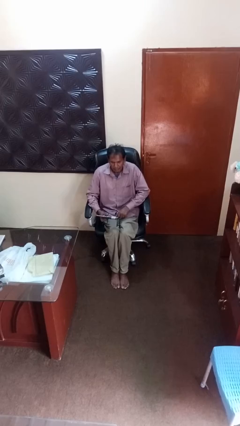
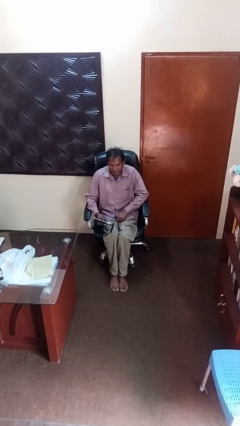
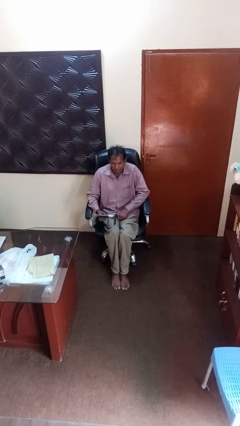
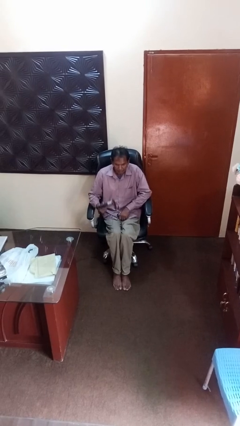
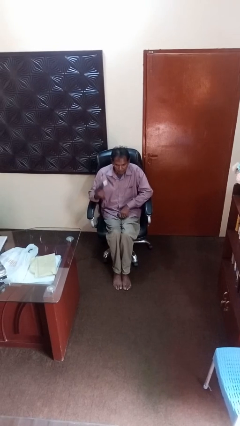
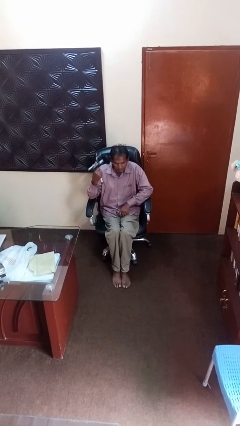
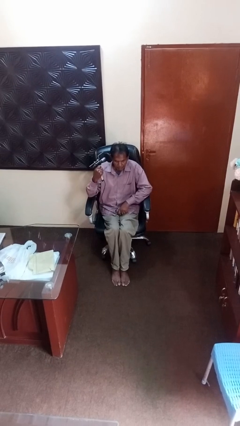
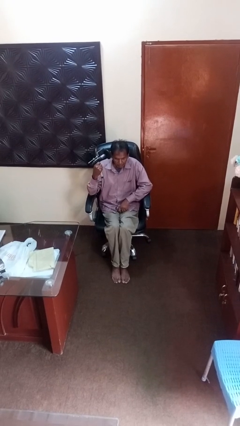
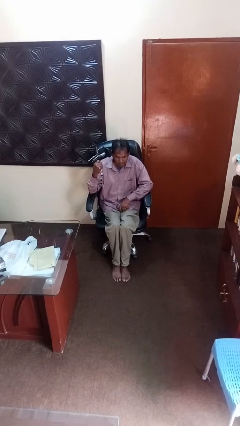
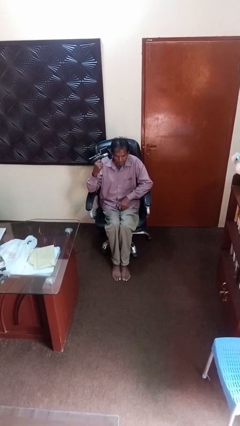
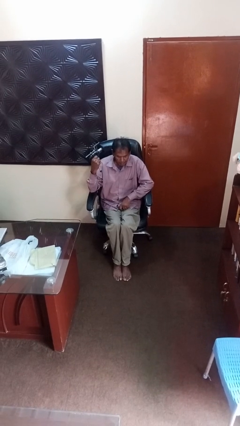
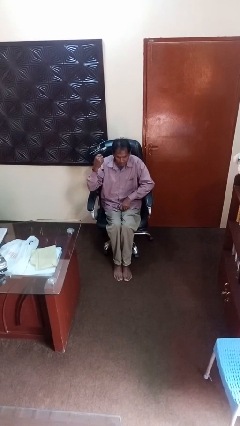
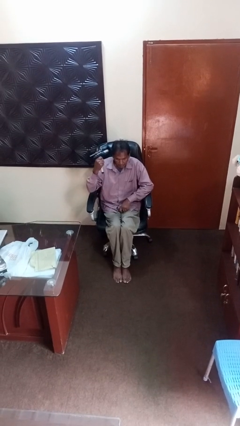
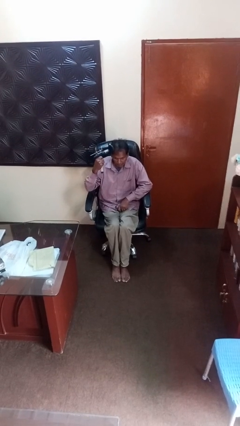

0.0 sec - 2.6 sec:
person dries hair with hairdryer

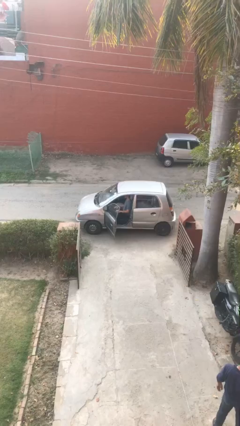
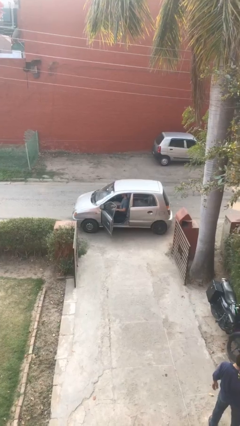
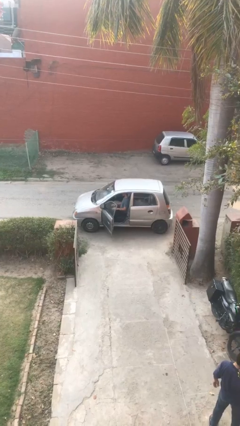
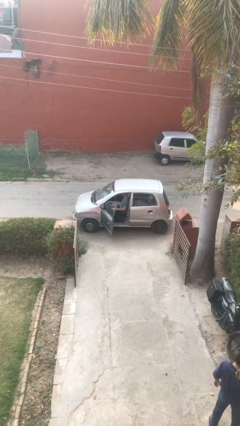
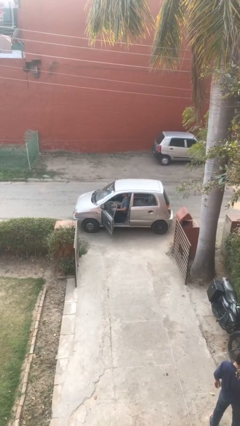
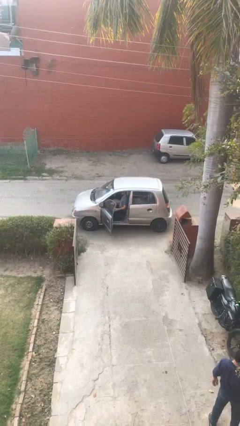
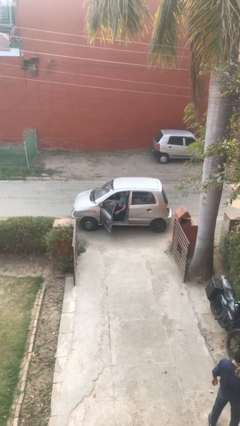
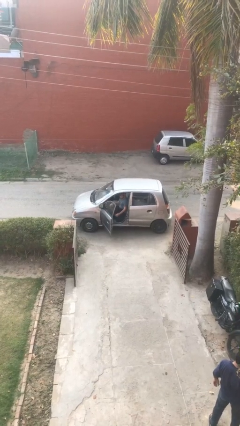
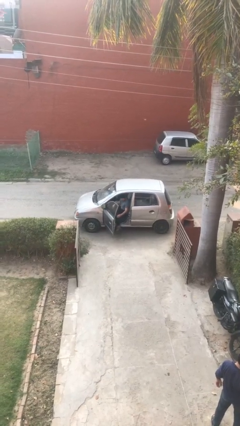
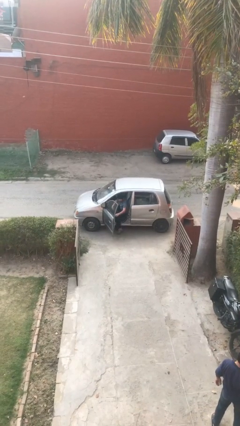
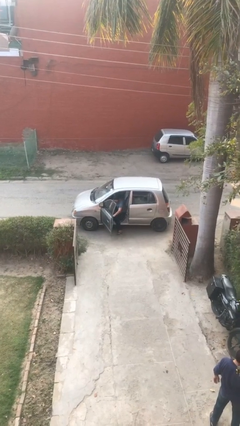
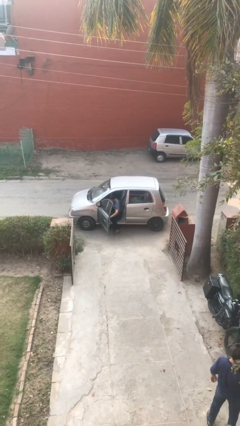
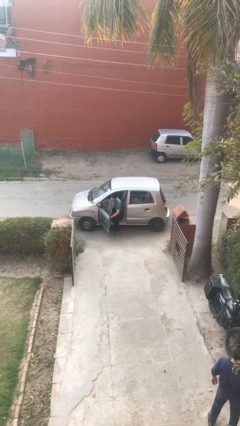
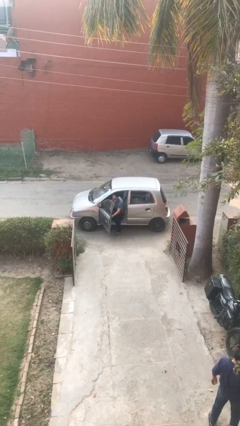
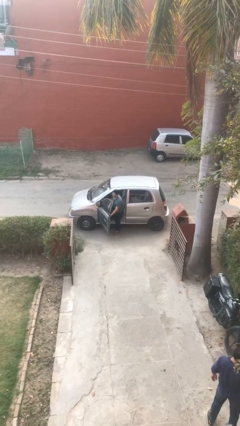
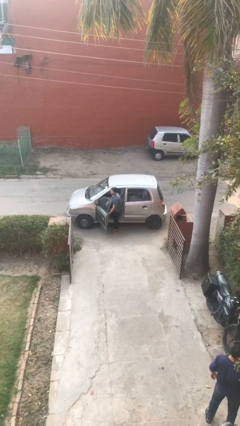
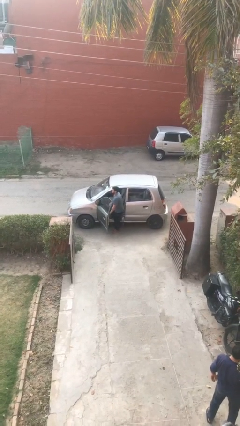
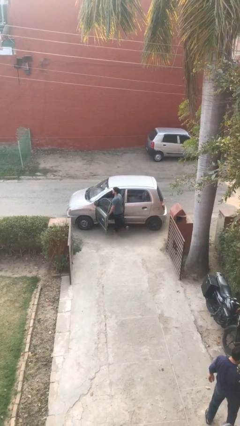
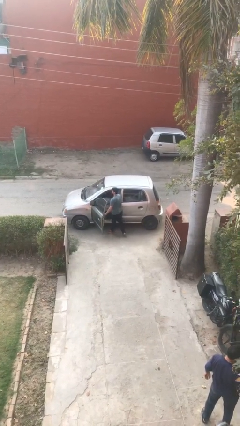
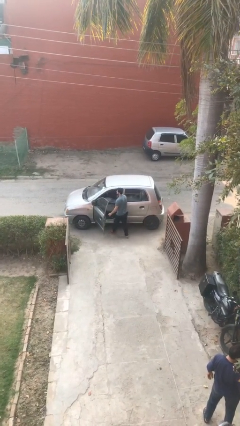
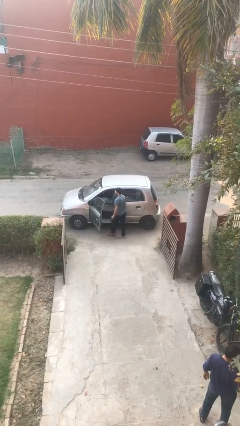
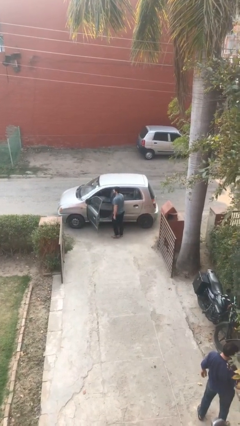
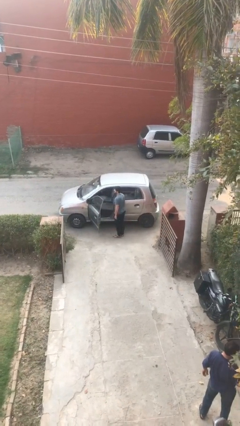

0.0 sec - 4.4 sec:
person exits car

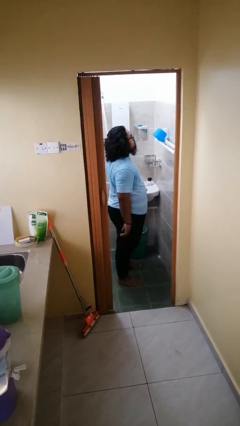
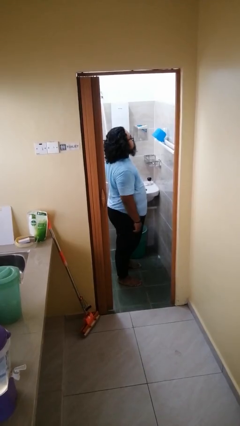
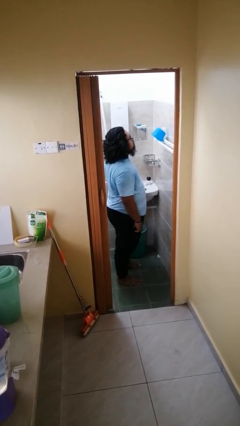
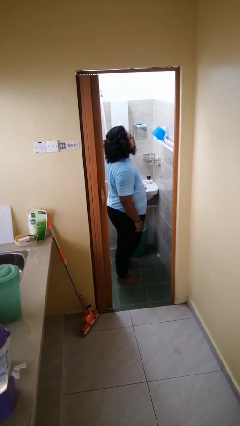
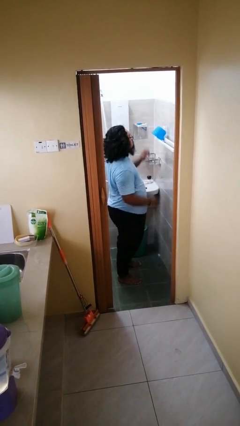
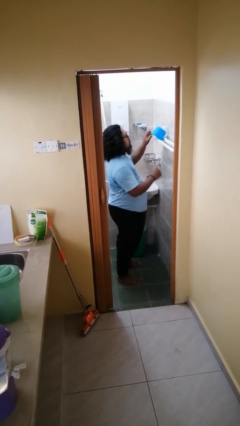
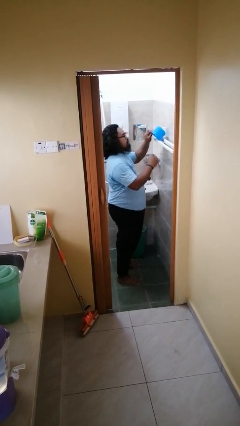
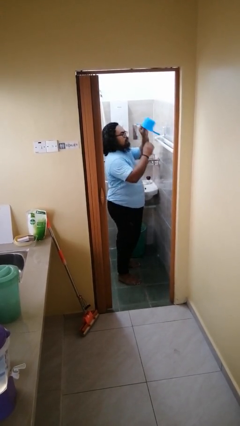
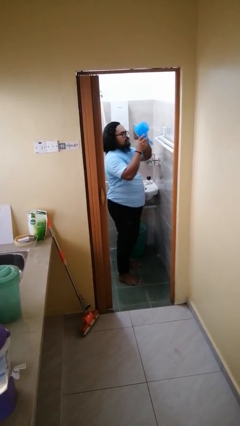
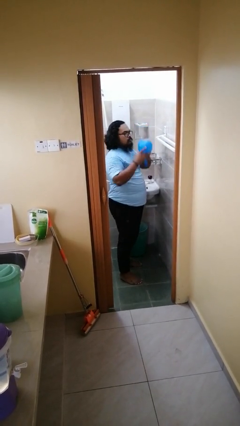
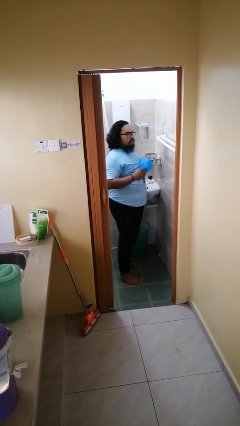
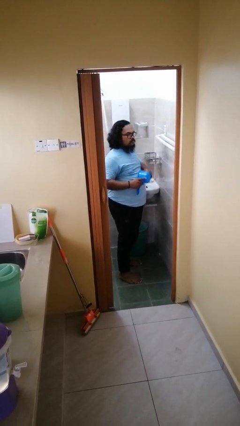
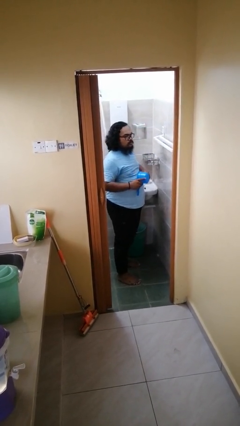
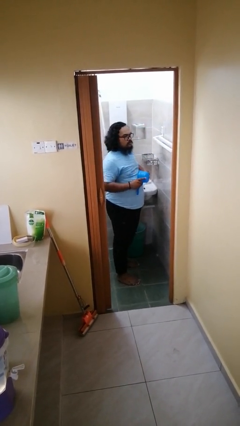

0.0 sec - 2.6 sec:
person picks up object from countertop

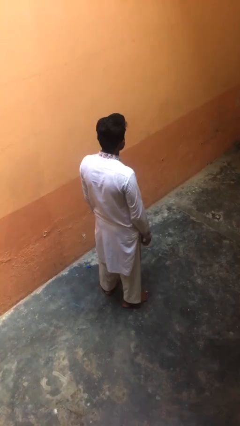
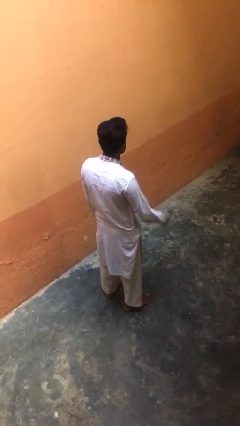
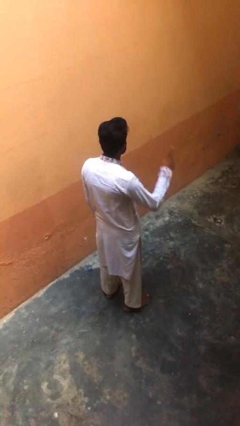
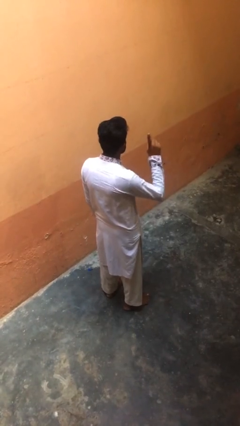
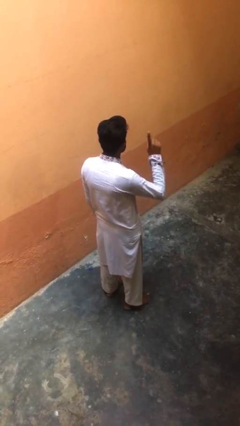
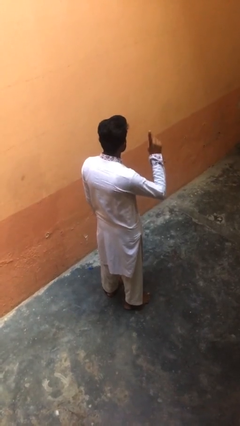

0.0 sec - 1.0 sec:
person gestures number one

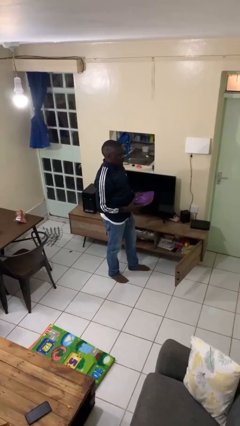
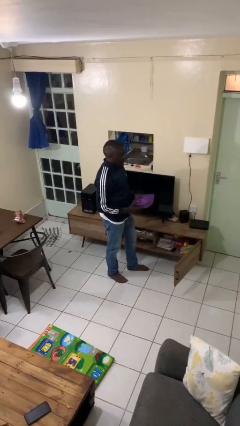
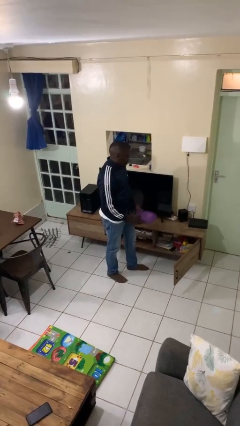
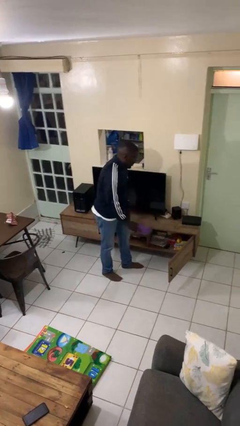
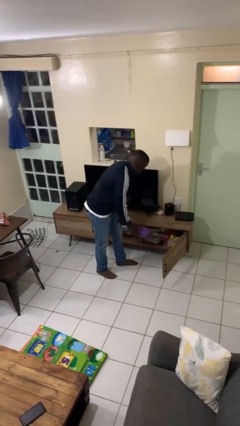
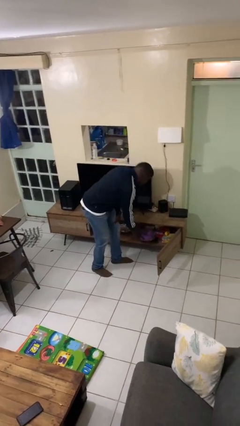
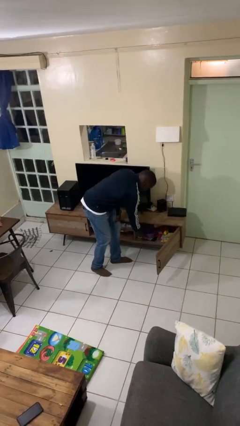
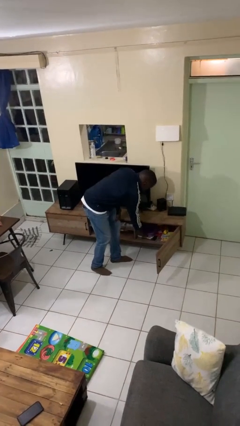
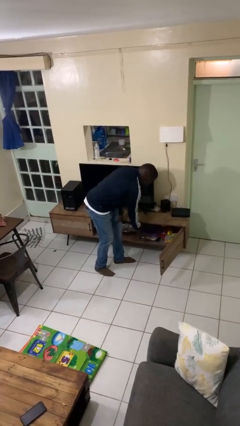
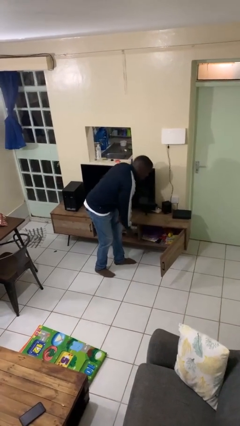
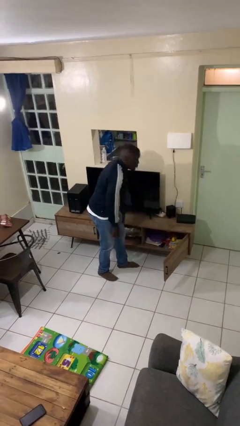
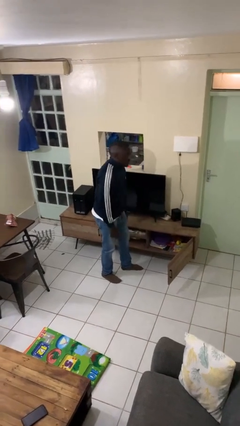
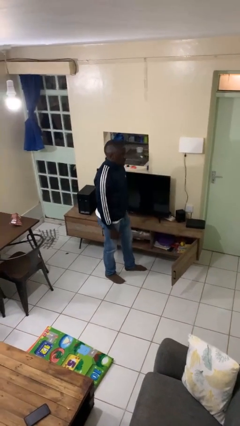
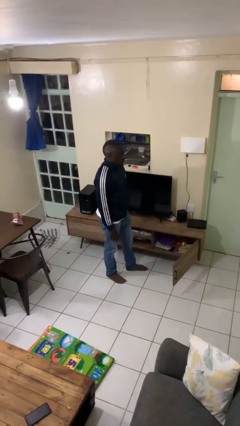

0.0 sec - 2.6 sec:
person puts down object into cabinet

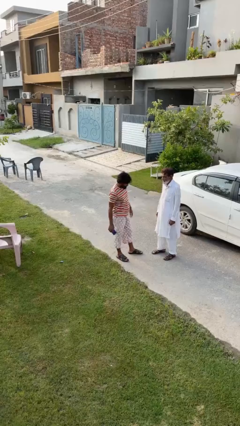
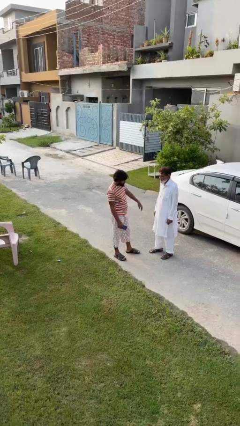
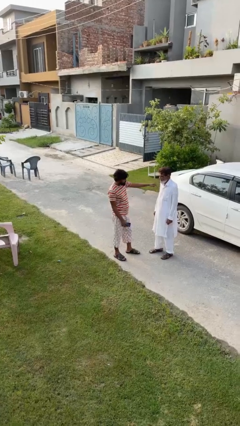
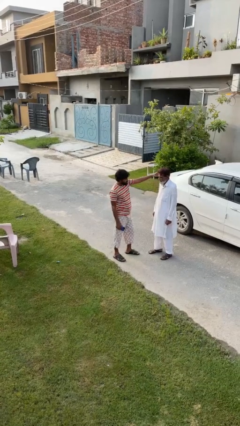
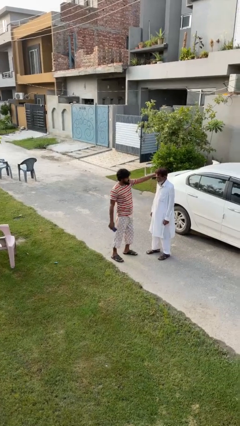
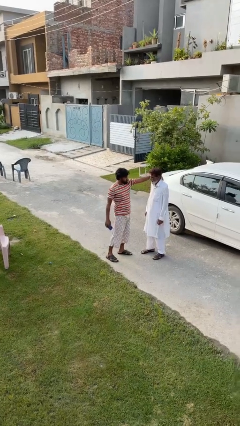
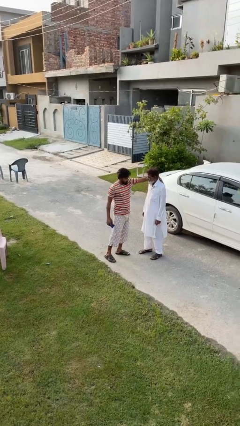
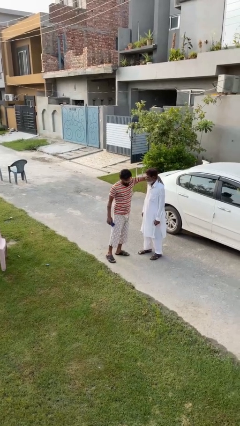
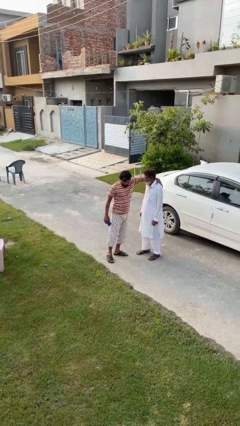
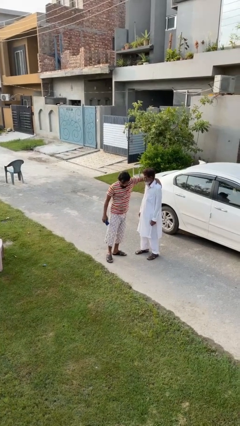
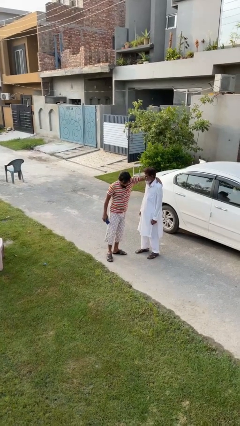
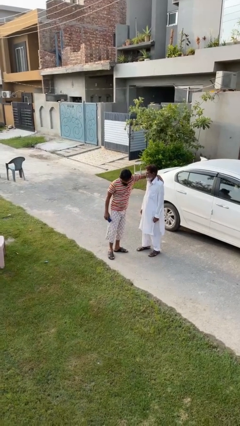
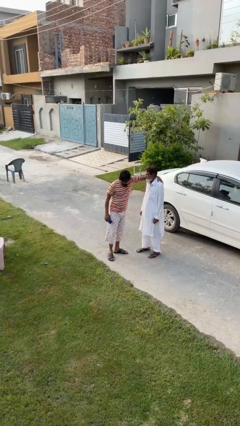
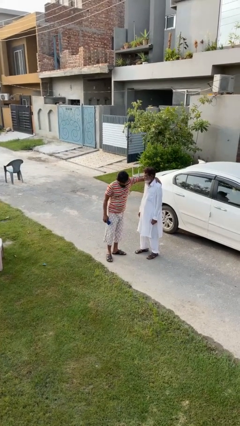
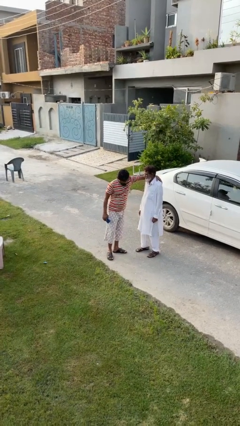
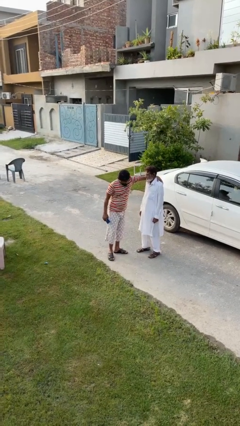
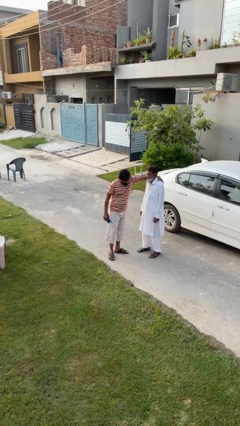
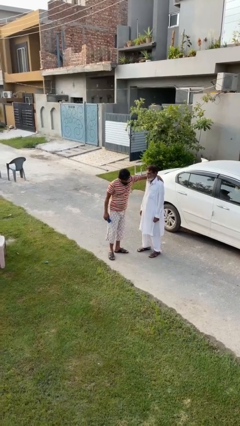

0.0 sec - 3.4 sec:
person pounds shoulders of person

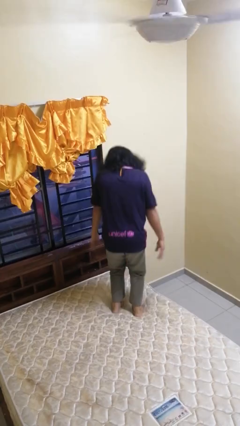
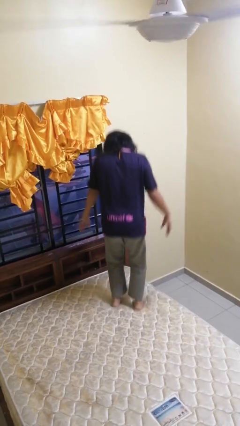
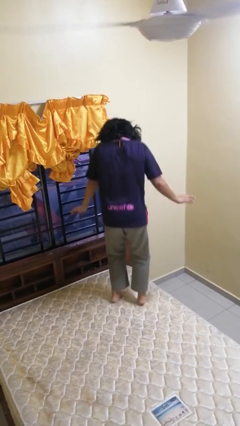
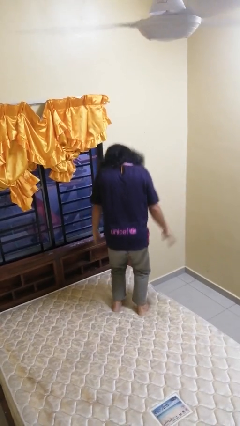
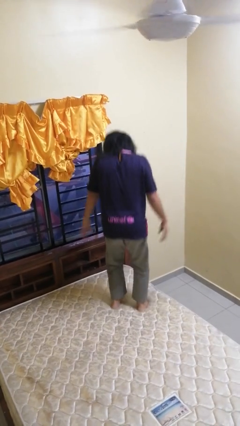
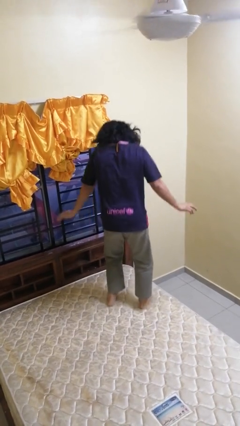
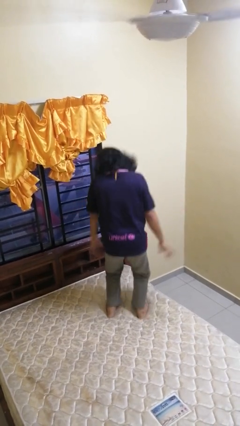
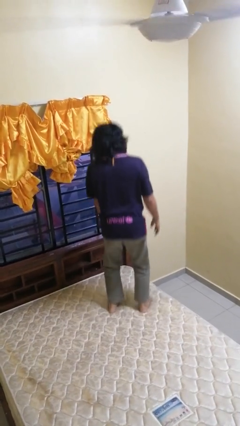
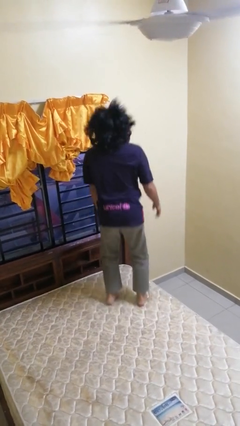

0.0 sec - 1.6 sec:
person jumps on bed
